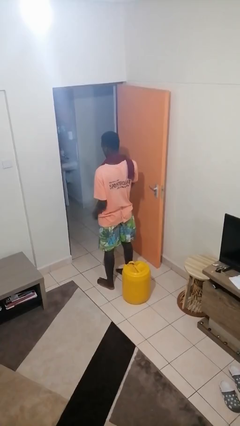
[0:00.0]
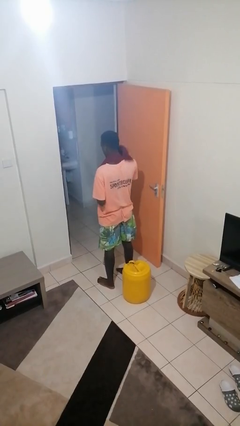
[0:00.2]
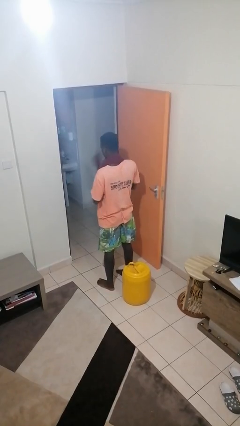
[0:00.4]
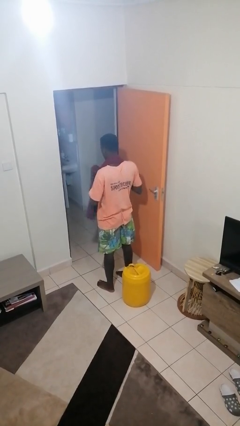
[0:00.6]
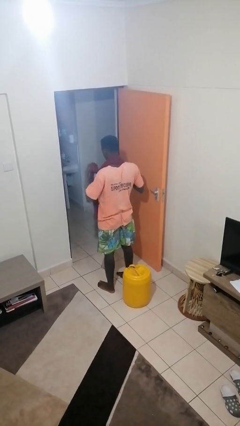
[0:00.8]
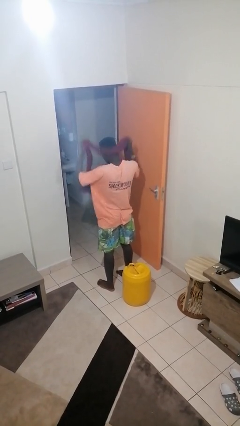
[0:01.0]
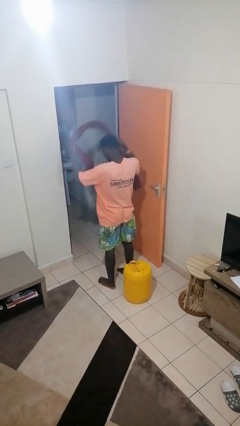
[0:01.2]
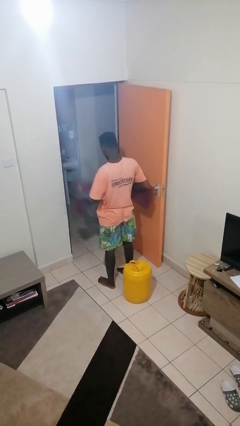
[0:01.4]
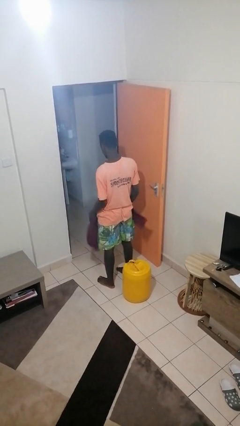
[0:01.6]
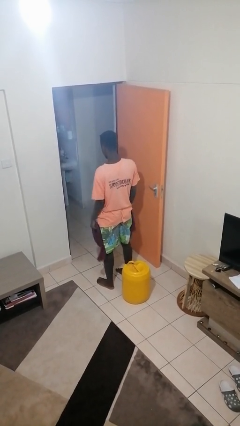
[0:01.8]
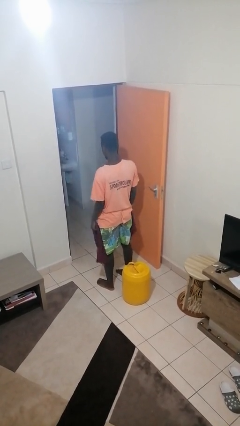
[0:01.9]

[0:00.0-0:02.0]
person takes off scarf

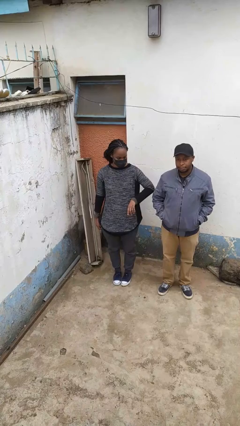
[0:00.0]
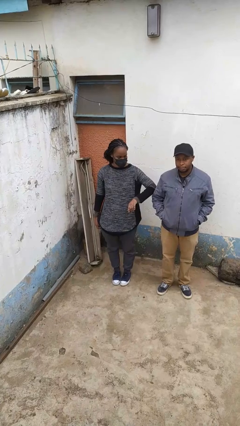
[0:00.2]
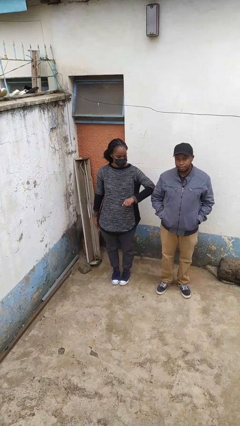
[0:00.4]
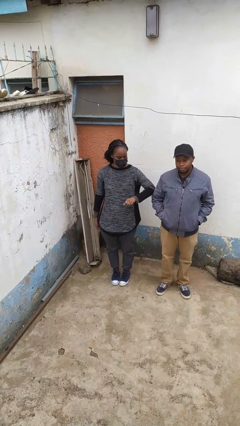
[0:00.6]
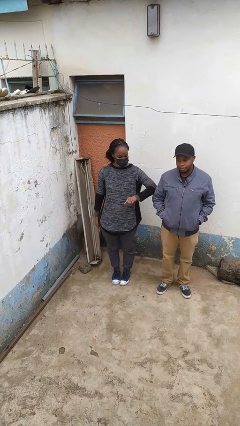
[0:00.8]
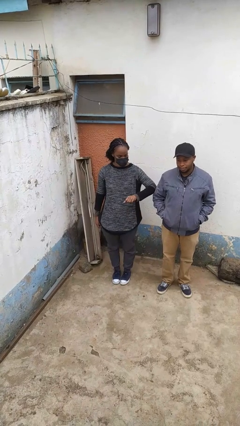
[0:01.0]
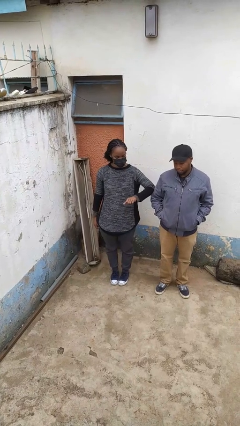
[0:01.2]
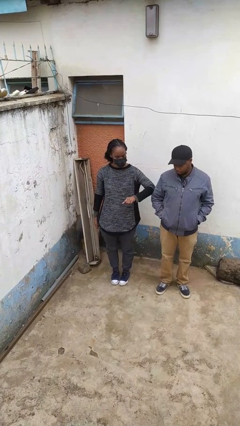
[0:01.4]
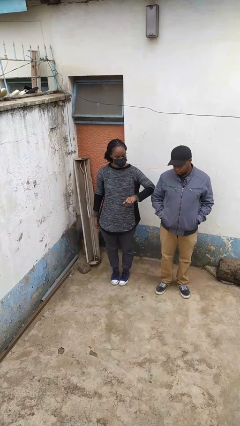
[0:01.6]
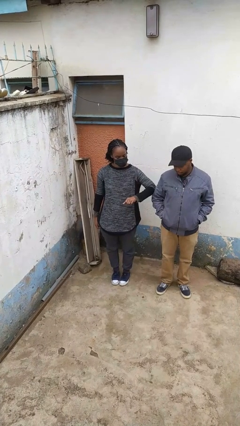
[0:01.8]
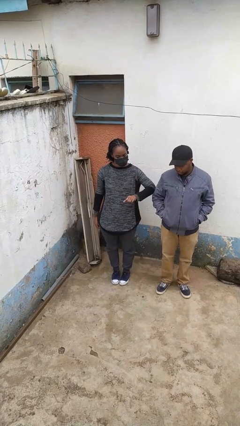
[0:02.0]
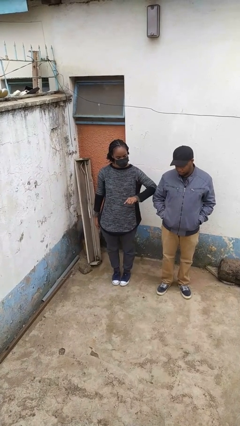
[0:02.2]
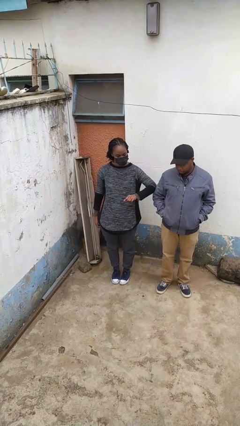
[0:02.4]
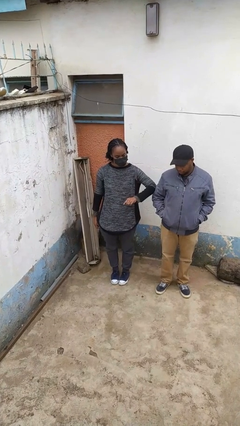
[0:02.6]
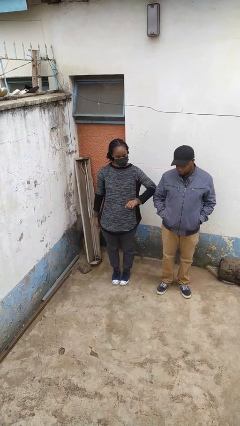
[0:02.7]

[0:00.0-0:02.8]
person nudges person with elbow

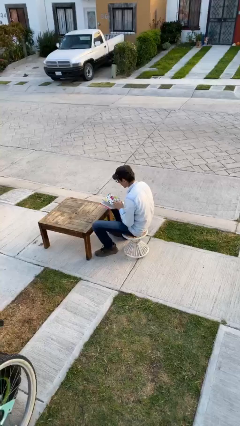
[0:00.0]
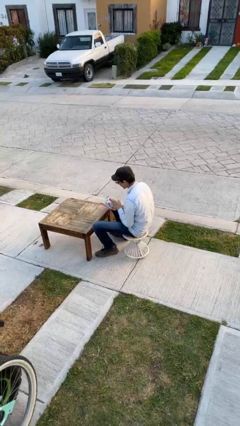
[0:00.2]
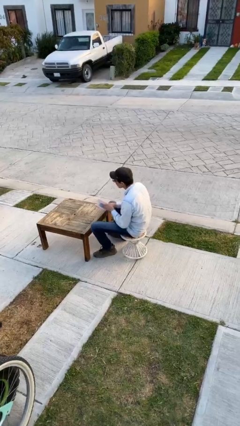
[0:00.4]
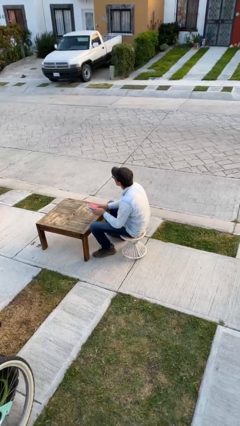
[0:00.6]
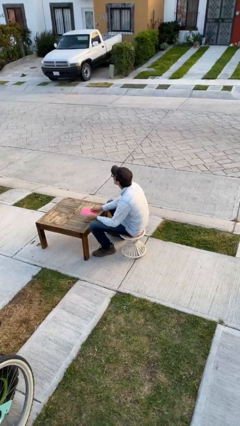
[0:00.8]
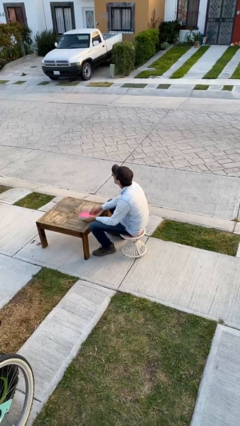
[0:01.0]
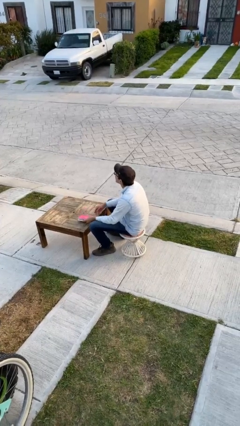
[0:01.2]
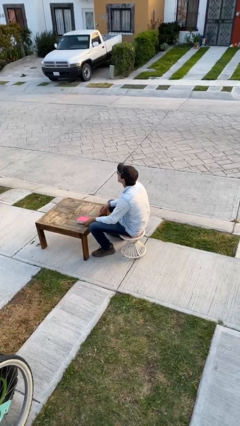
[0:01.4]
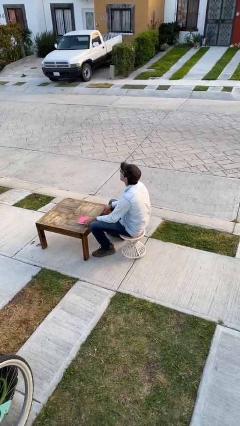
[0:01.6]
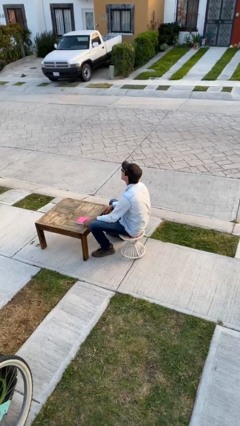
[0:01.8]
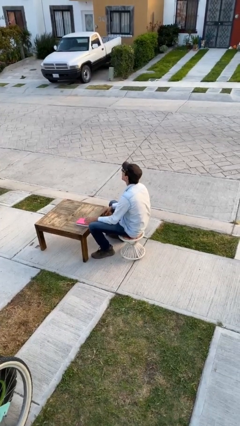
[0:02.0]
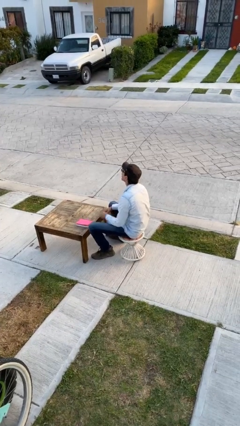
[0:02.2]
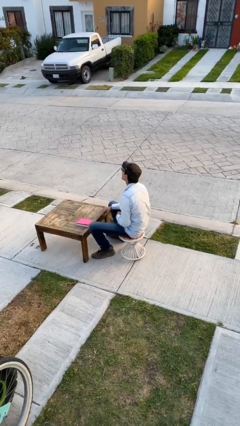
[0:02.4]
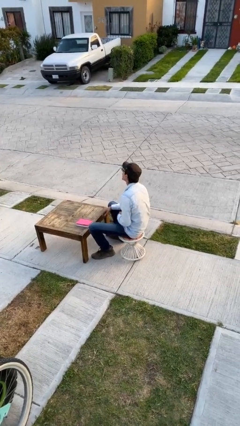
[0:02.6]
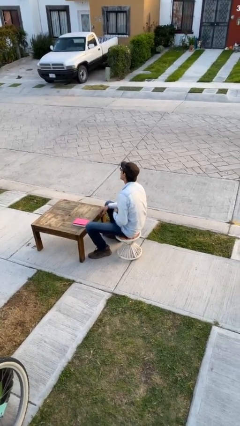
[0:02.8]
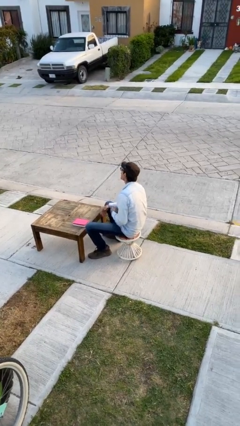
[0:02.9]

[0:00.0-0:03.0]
person puts down object on table

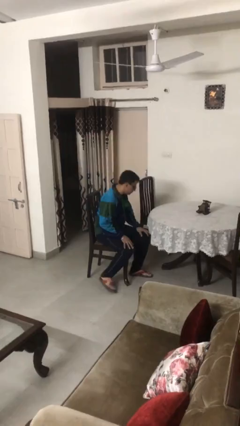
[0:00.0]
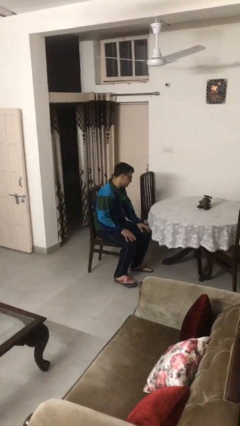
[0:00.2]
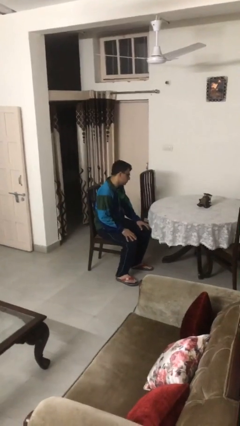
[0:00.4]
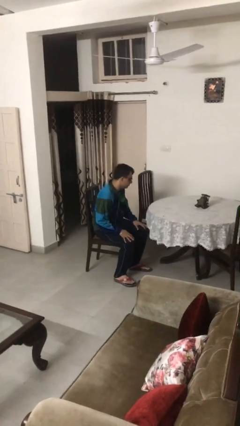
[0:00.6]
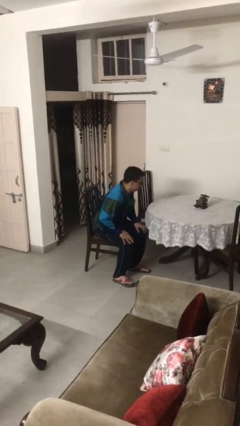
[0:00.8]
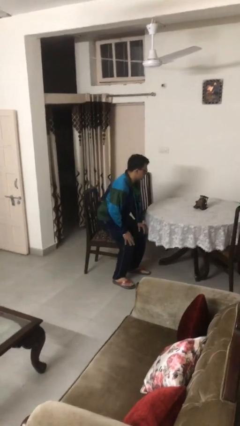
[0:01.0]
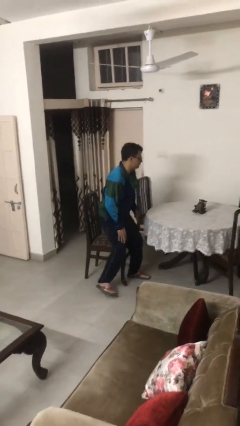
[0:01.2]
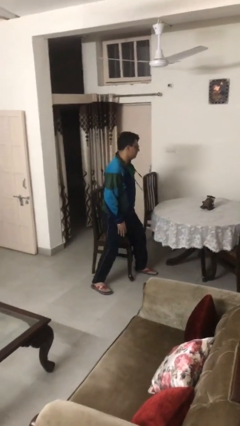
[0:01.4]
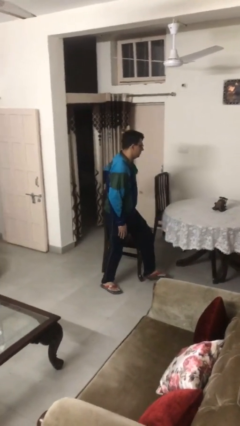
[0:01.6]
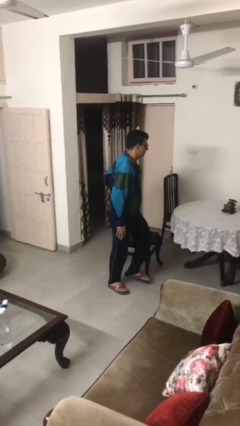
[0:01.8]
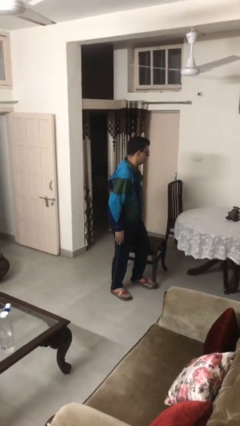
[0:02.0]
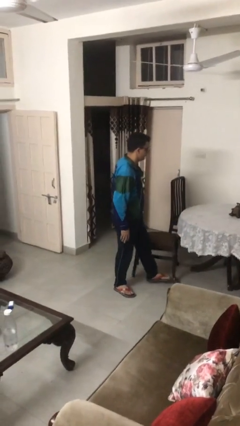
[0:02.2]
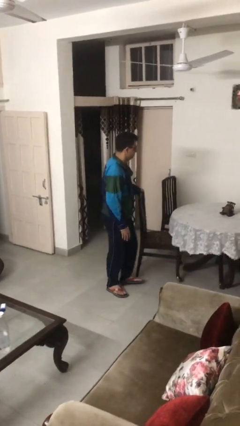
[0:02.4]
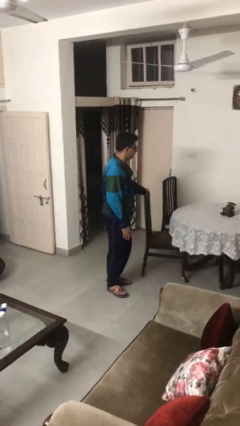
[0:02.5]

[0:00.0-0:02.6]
person stands up

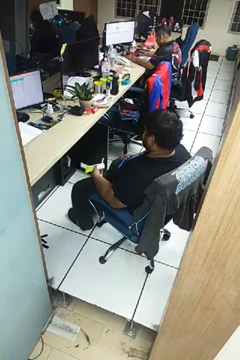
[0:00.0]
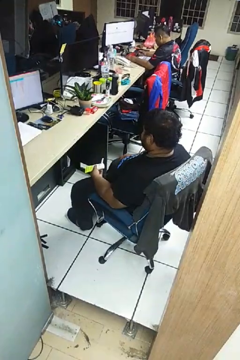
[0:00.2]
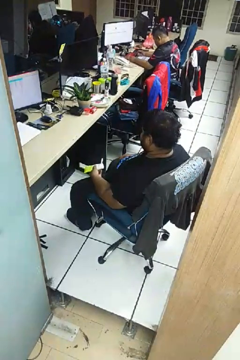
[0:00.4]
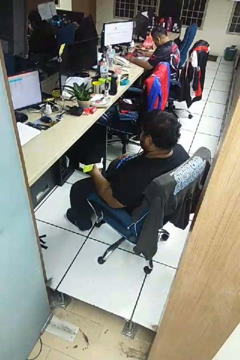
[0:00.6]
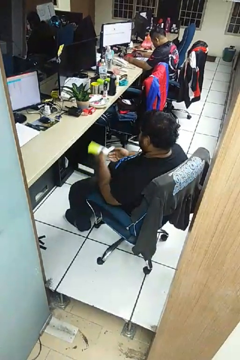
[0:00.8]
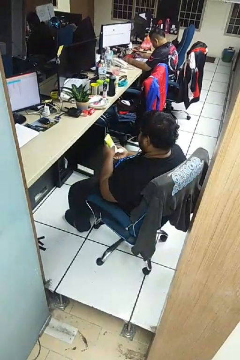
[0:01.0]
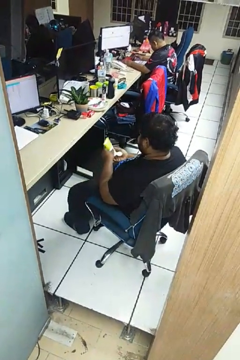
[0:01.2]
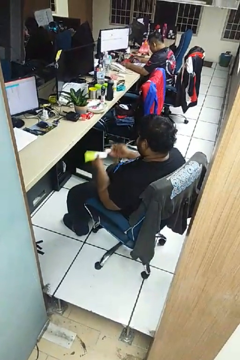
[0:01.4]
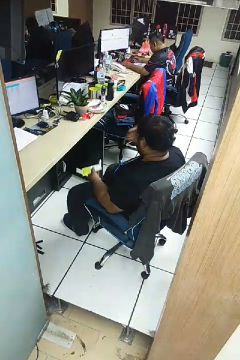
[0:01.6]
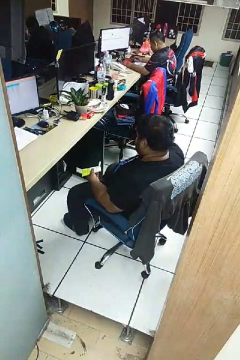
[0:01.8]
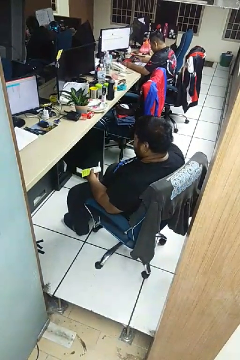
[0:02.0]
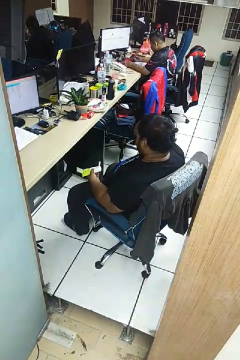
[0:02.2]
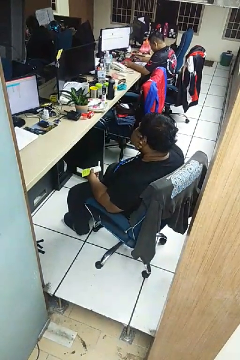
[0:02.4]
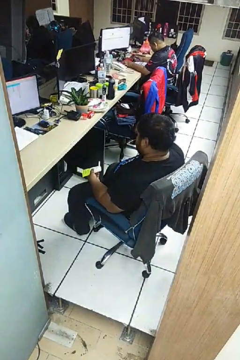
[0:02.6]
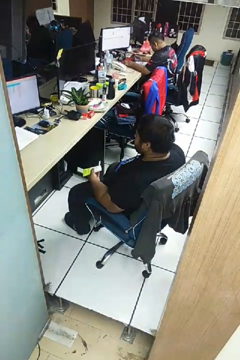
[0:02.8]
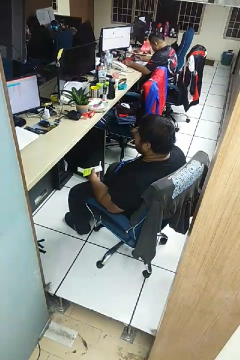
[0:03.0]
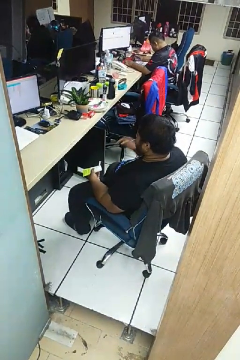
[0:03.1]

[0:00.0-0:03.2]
person applies sunscreen

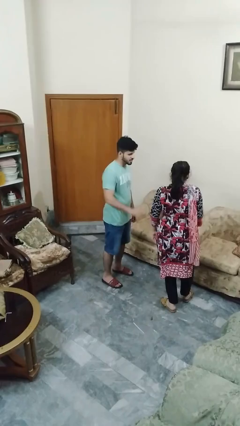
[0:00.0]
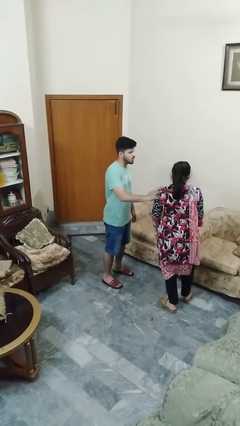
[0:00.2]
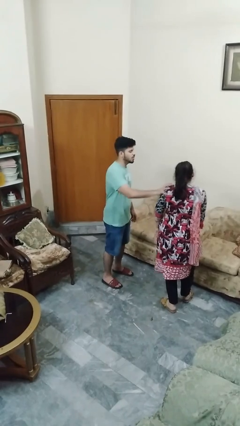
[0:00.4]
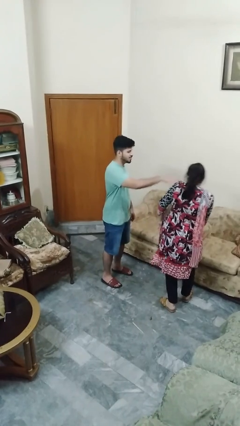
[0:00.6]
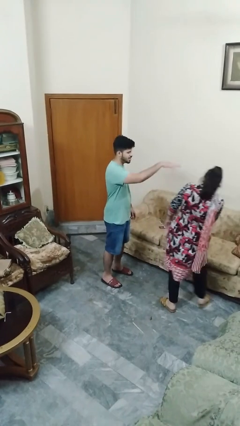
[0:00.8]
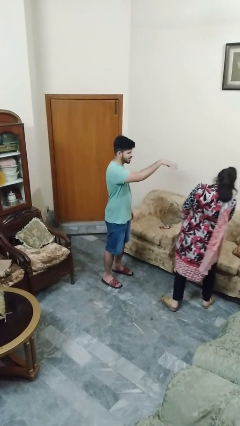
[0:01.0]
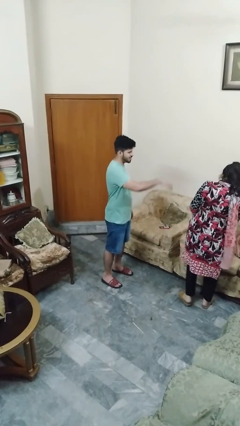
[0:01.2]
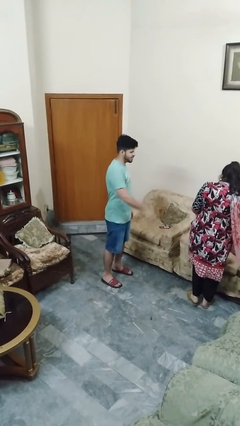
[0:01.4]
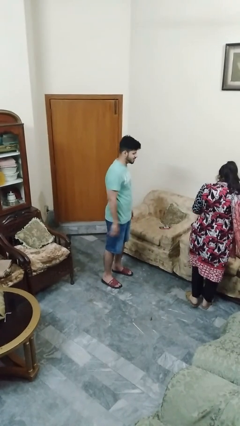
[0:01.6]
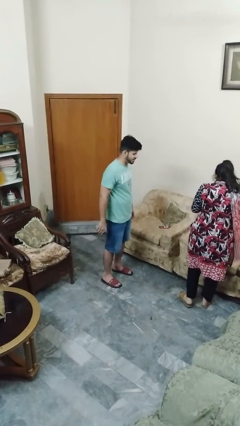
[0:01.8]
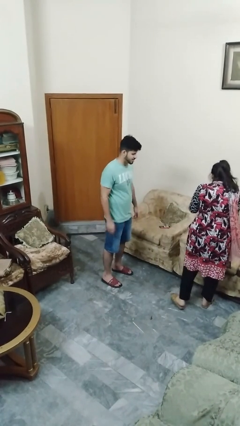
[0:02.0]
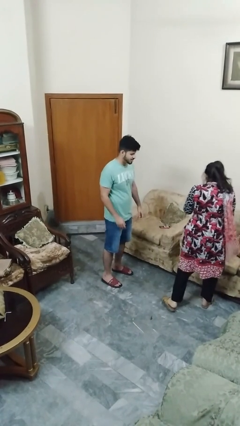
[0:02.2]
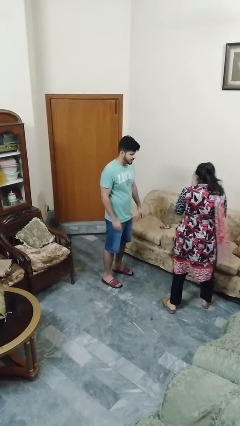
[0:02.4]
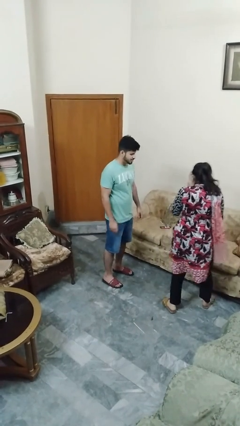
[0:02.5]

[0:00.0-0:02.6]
person shoves person

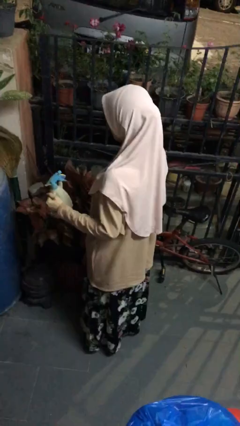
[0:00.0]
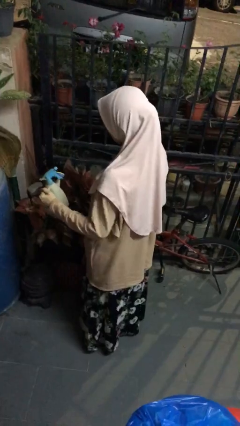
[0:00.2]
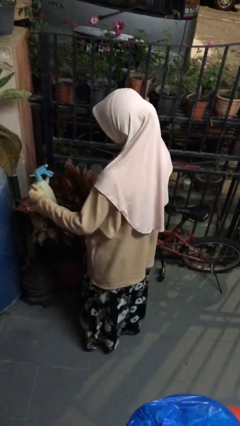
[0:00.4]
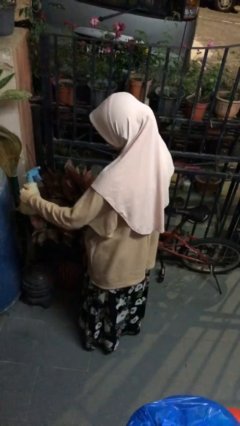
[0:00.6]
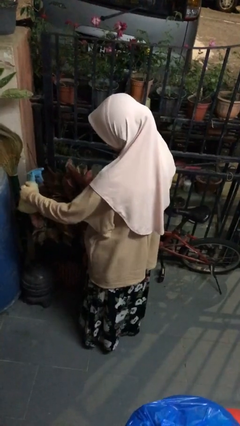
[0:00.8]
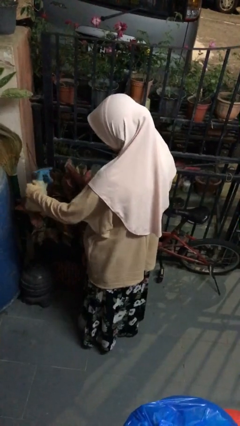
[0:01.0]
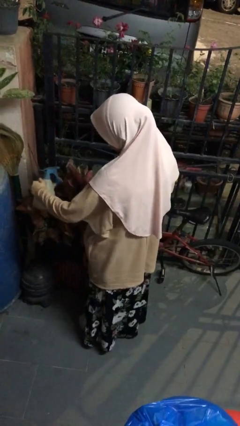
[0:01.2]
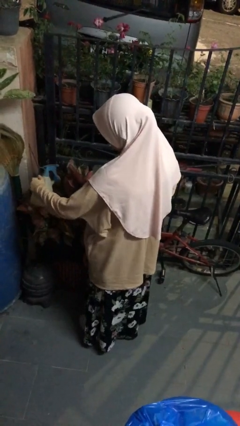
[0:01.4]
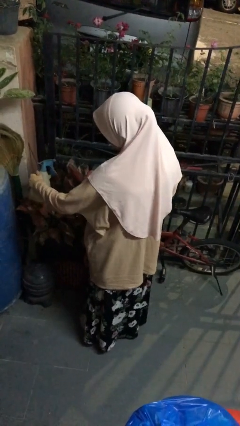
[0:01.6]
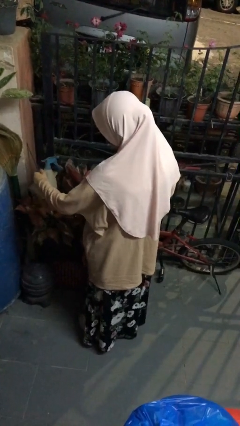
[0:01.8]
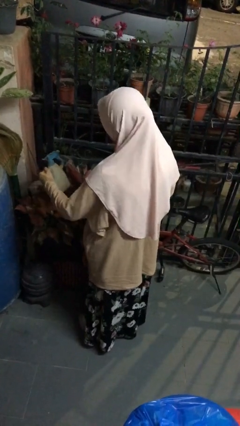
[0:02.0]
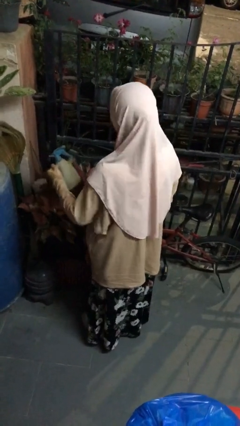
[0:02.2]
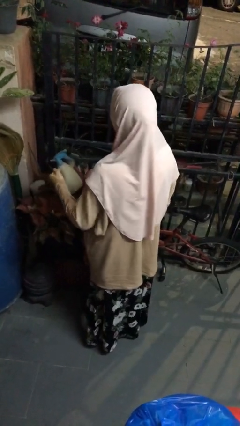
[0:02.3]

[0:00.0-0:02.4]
person waters houseplant
